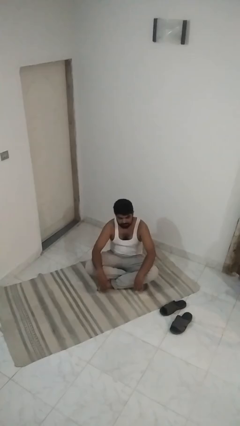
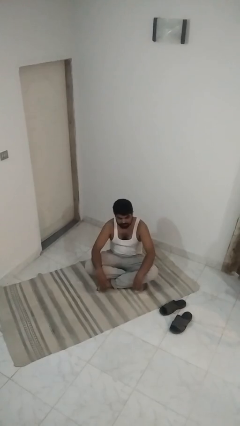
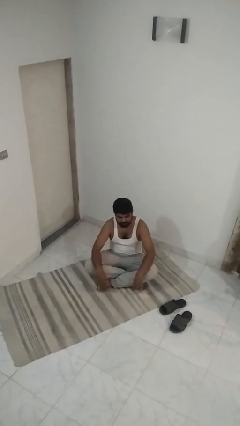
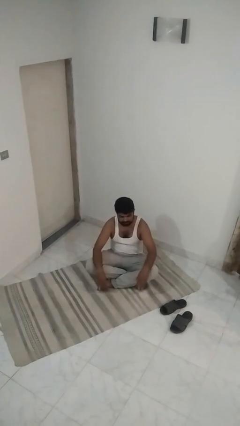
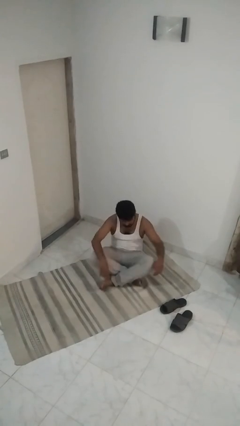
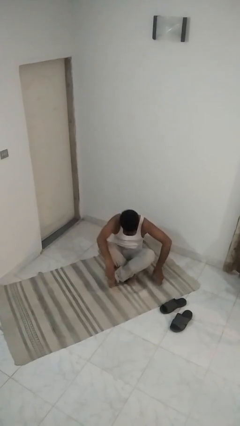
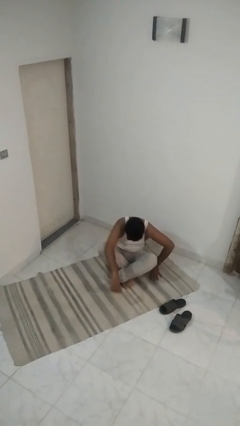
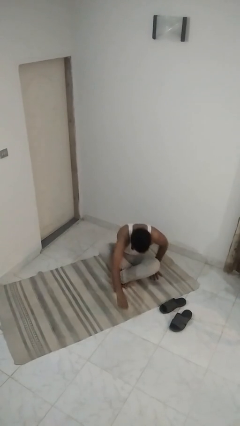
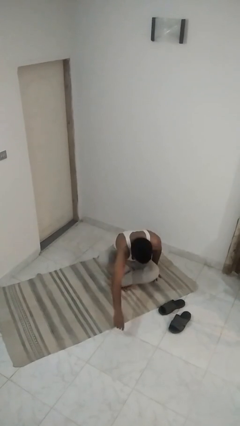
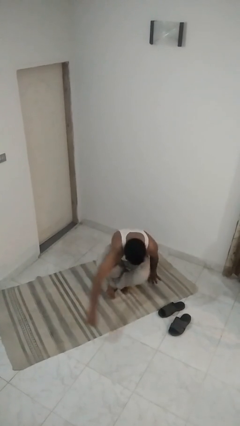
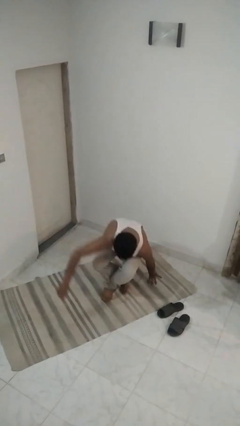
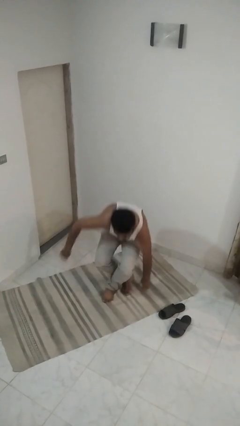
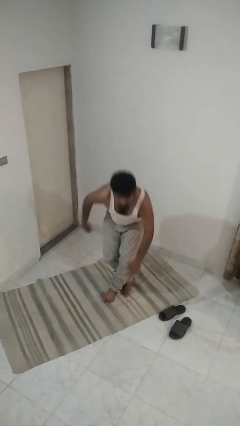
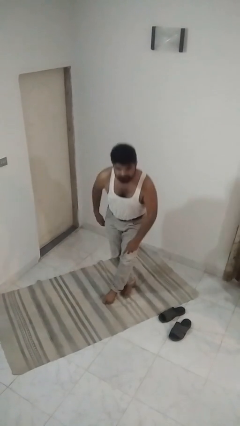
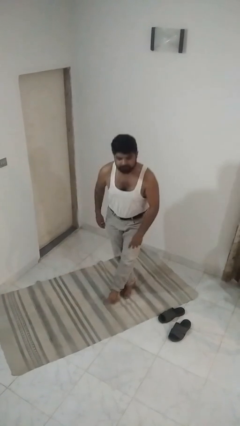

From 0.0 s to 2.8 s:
person stands up from floor

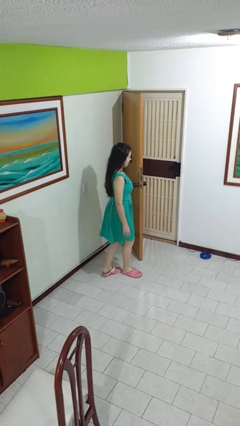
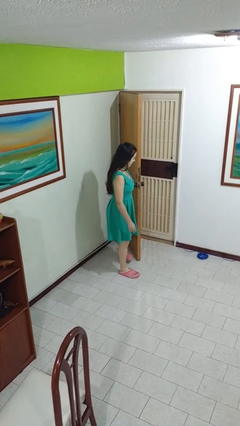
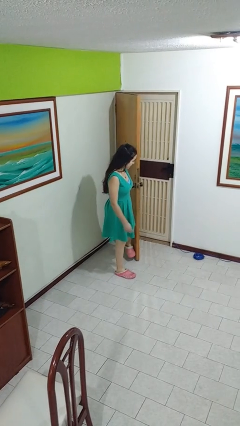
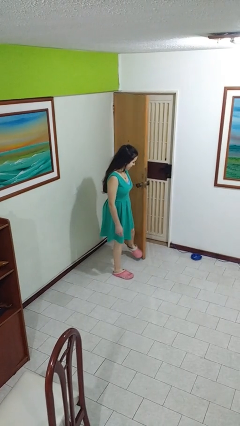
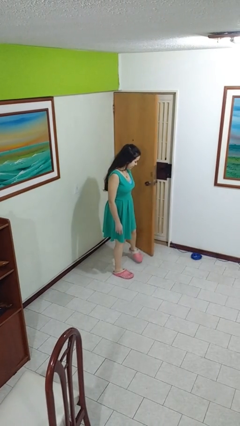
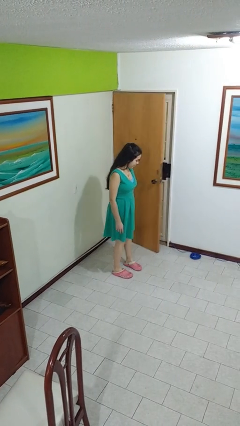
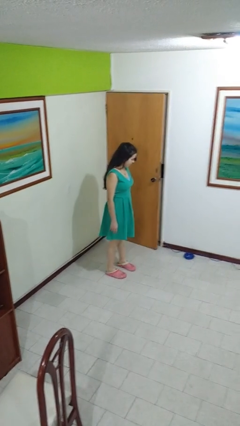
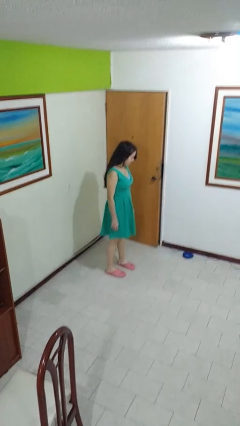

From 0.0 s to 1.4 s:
person closes door with foot

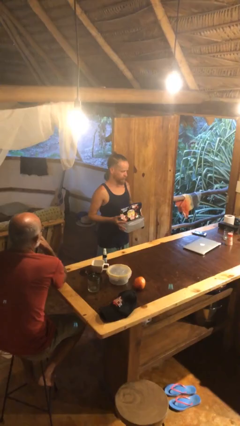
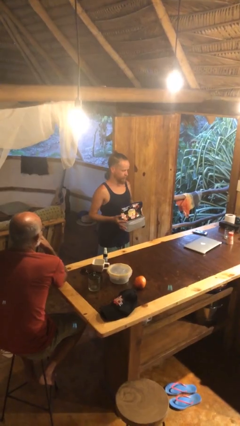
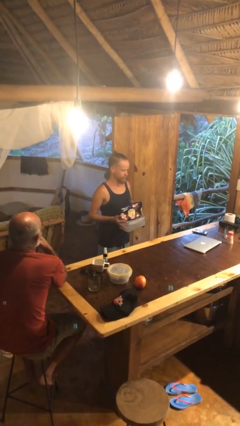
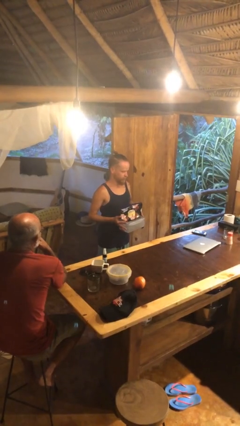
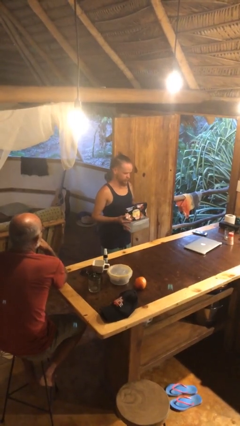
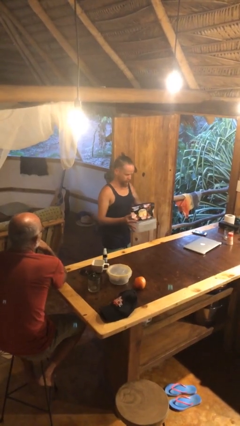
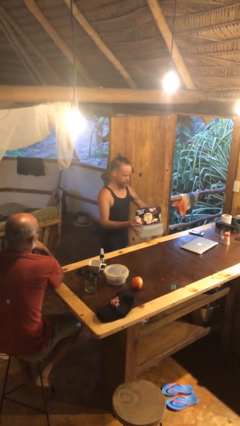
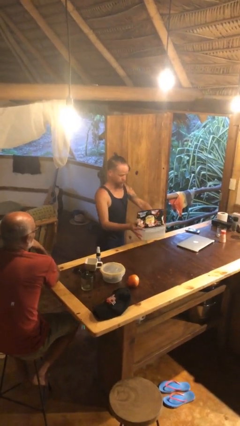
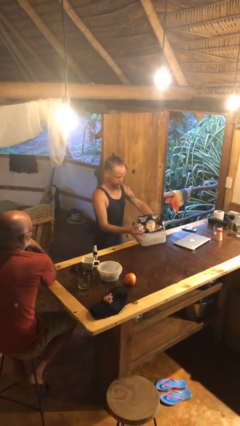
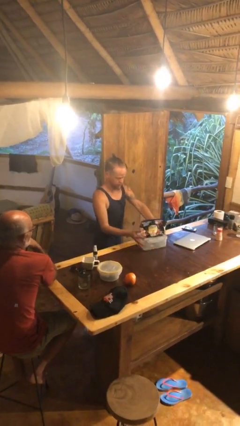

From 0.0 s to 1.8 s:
person puts down object on table

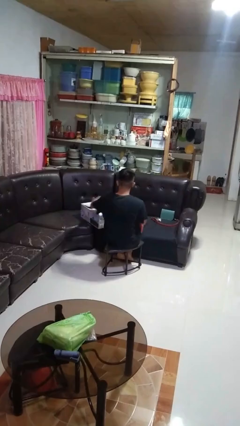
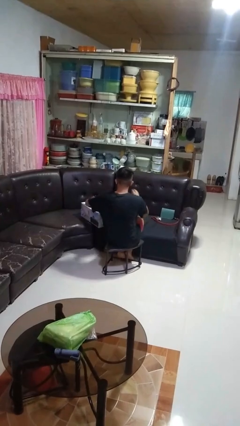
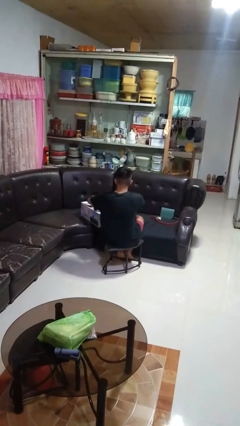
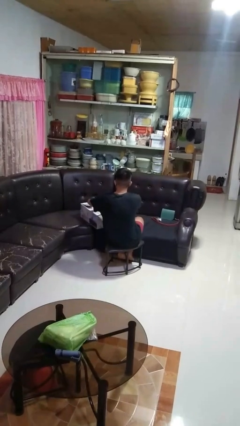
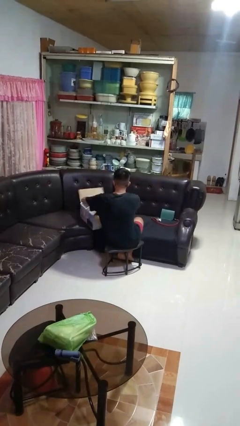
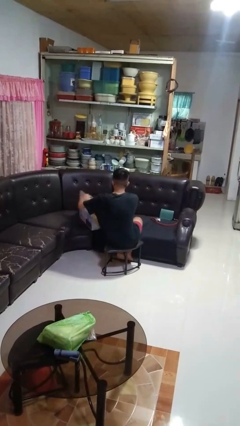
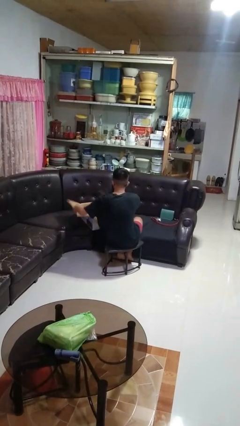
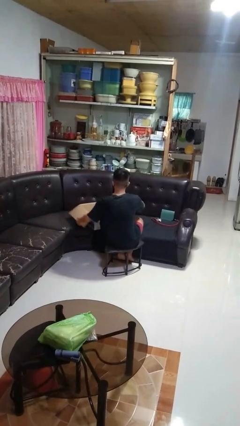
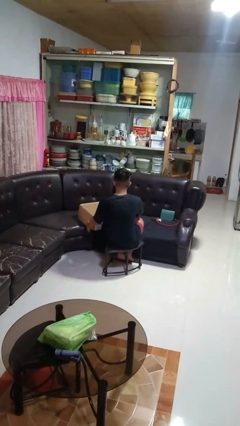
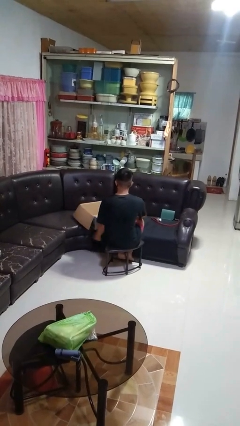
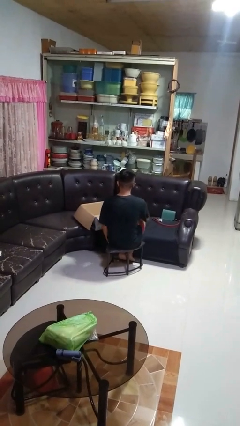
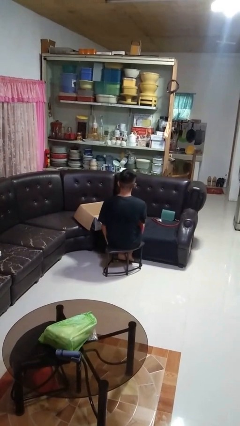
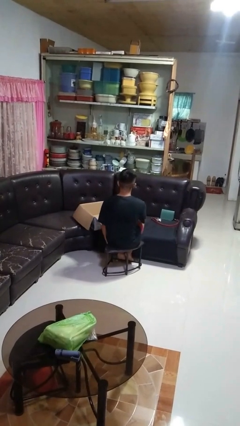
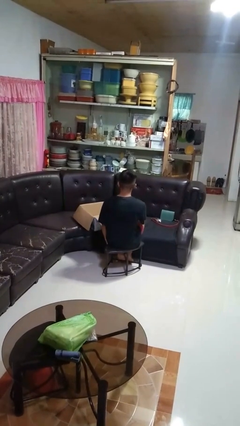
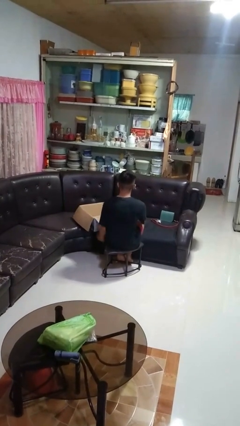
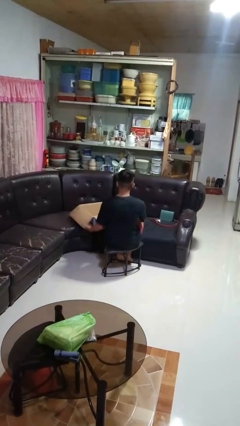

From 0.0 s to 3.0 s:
person opens box

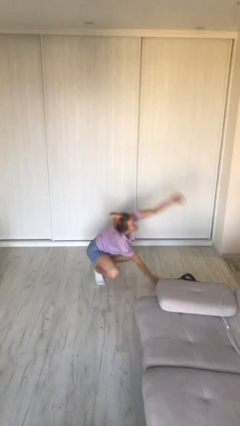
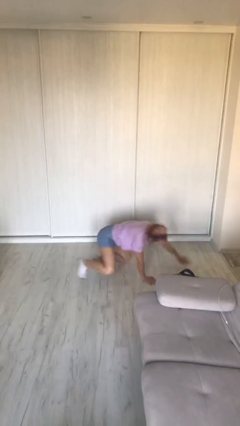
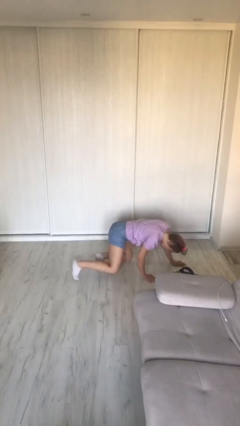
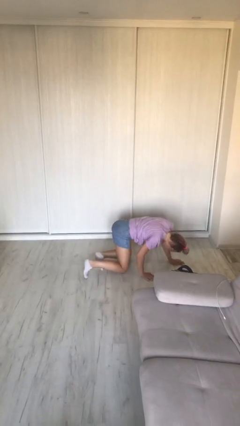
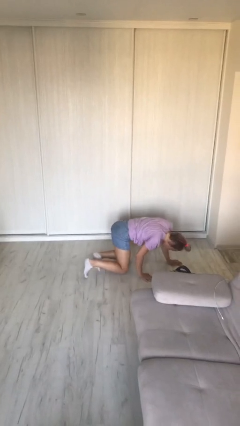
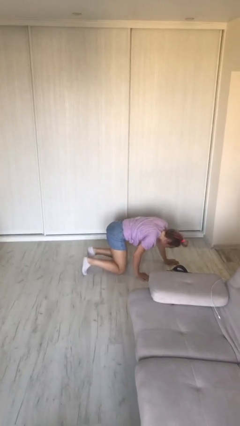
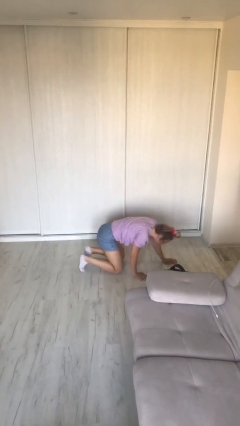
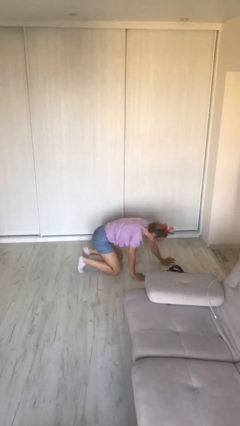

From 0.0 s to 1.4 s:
person trips on object on floor

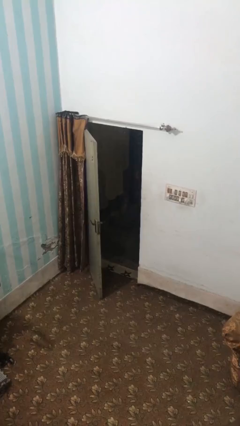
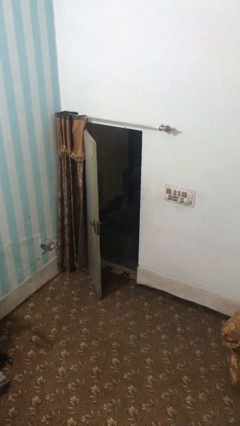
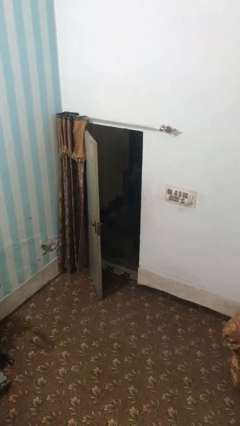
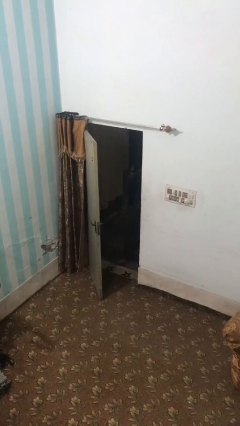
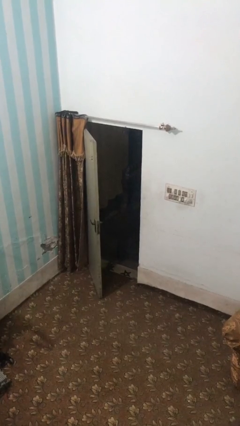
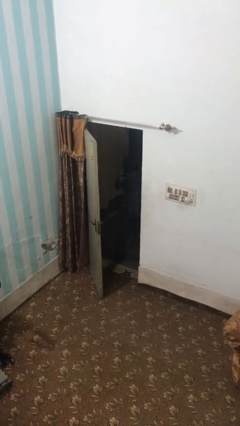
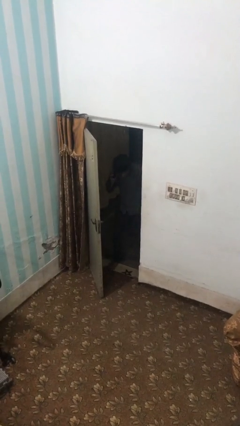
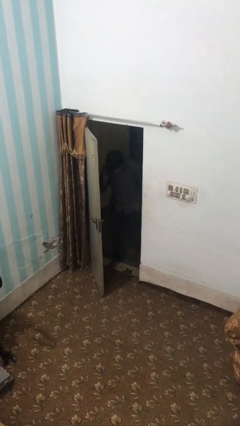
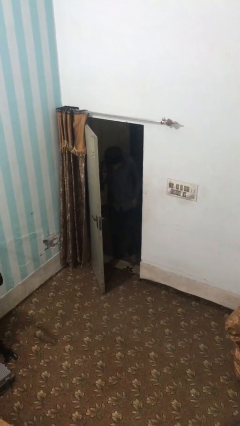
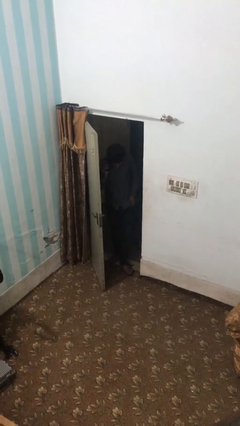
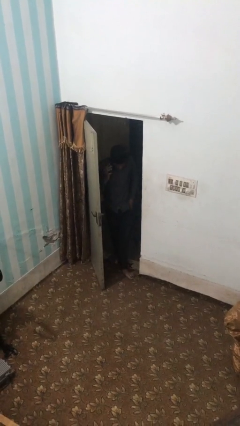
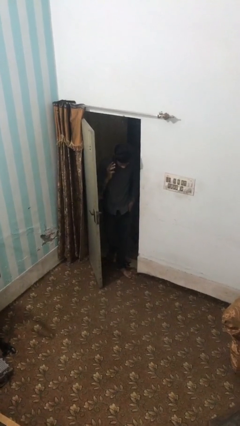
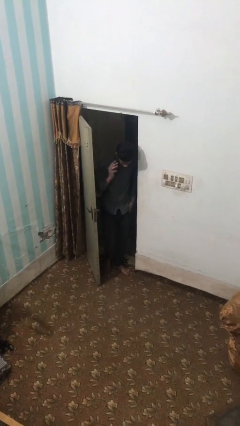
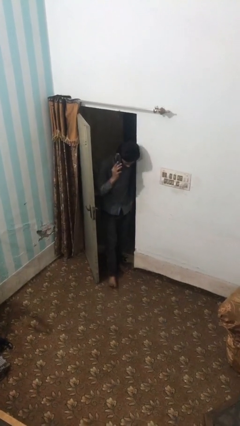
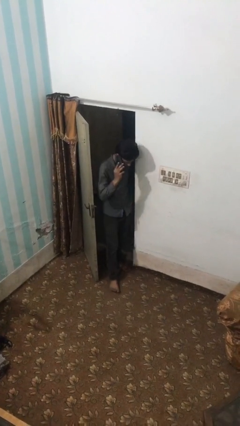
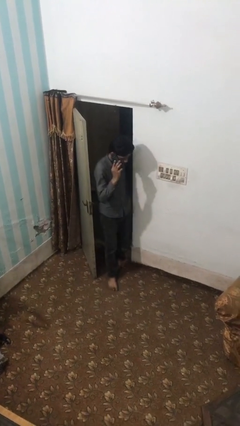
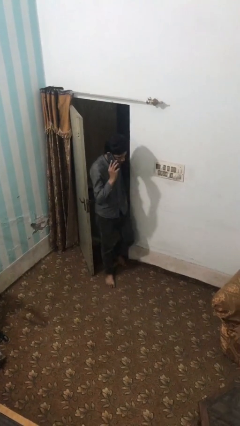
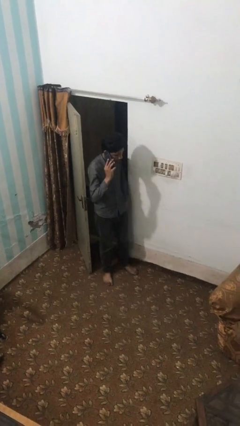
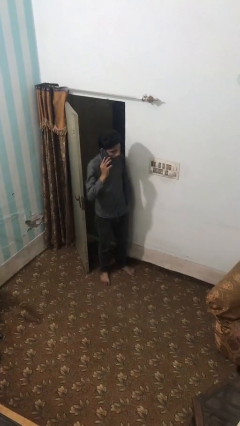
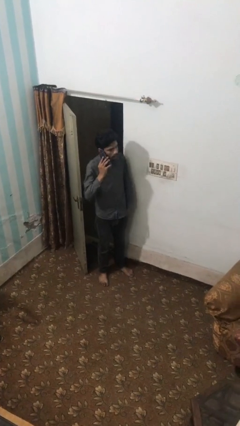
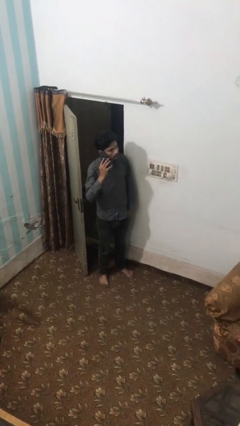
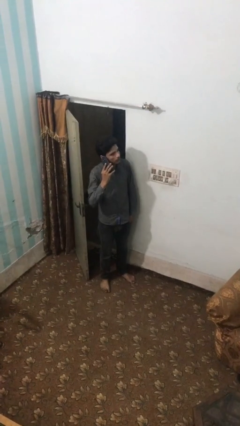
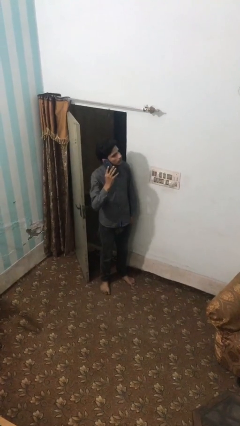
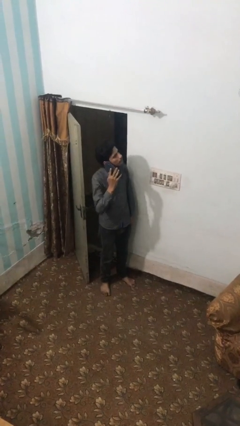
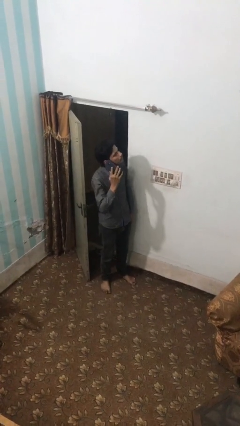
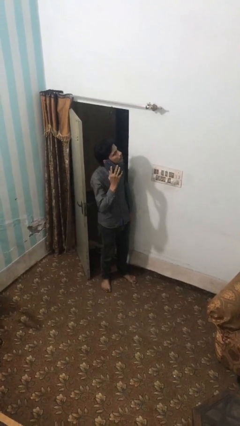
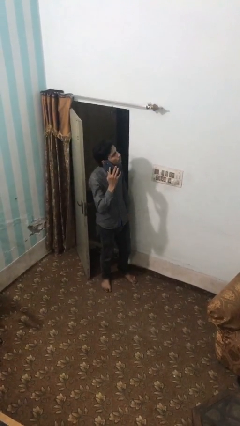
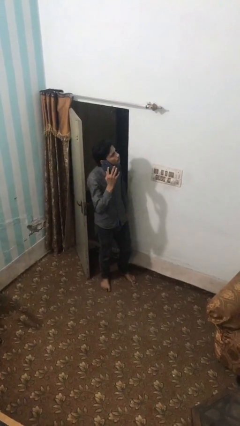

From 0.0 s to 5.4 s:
person enters scene through structure

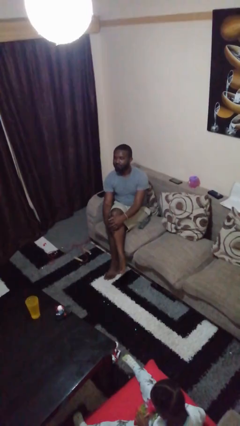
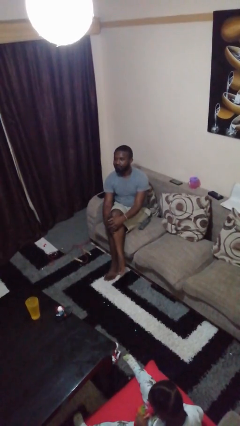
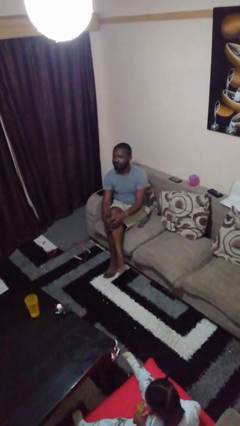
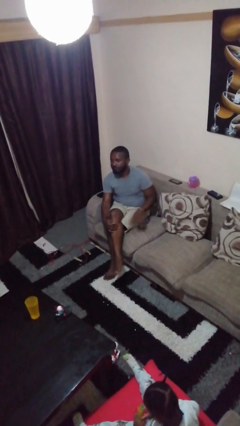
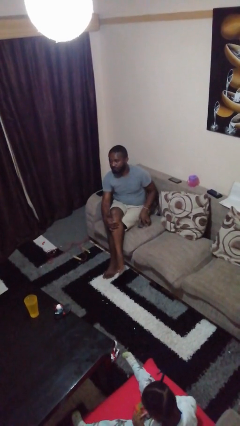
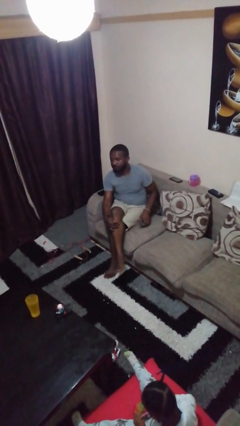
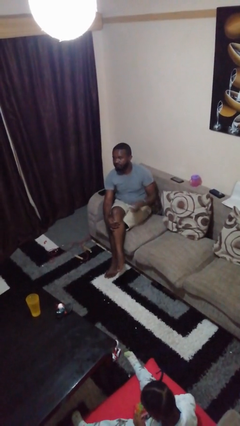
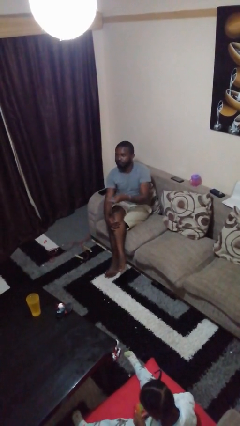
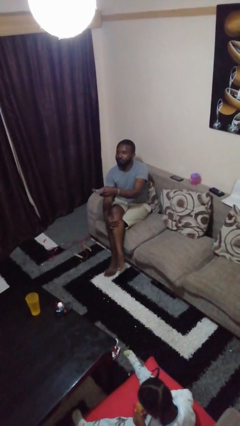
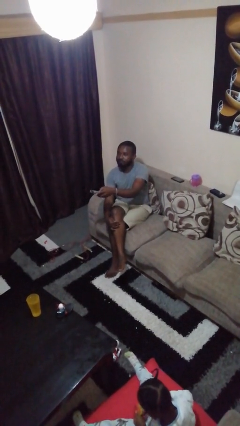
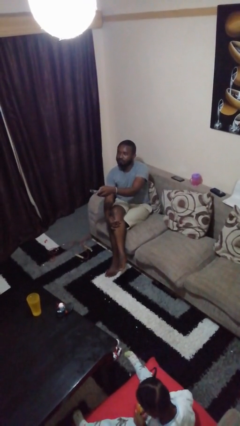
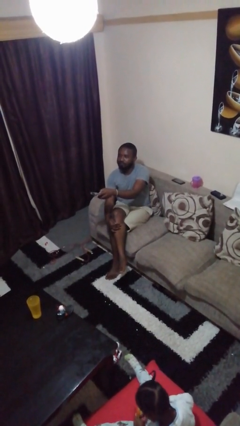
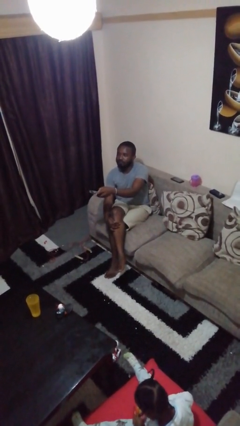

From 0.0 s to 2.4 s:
person uses television remote
